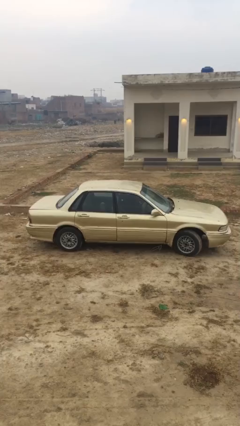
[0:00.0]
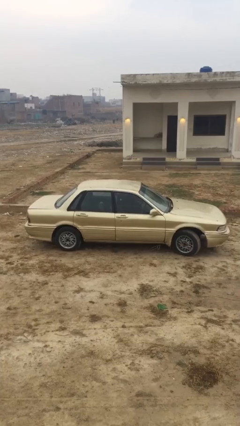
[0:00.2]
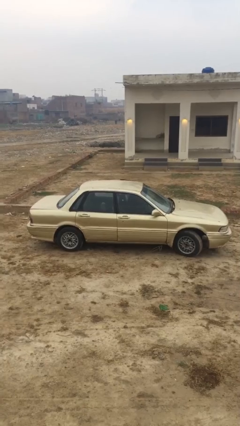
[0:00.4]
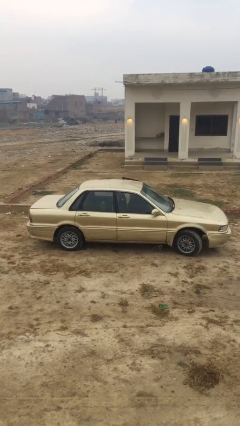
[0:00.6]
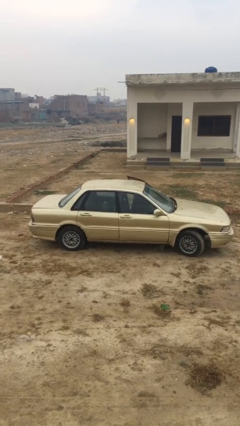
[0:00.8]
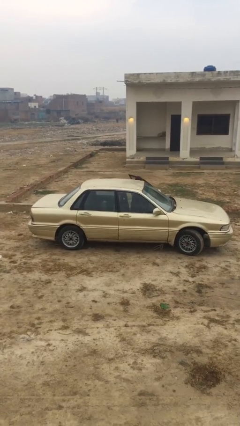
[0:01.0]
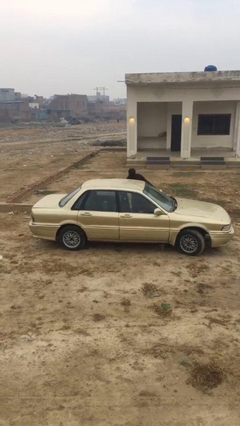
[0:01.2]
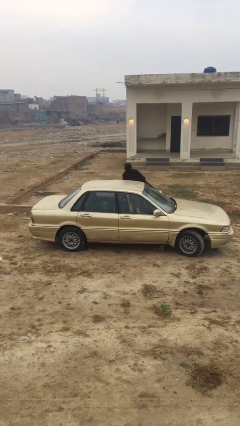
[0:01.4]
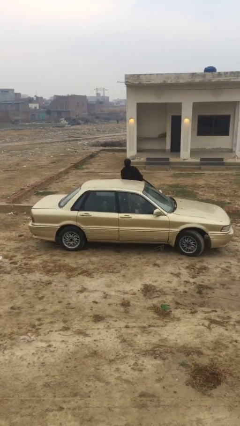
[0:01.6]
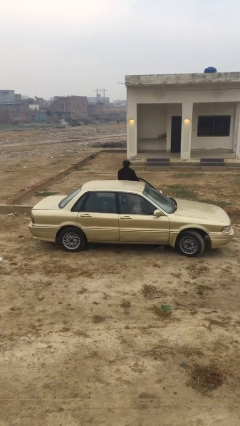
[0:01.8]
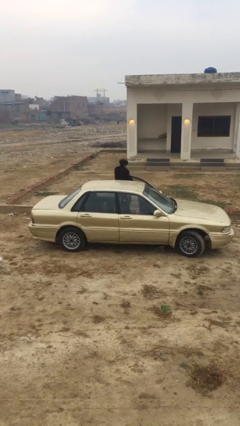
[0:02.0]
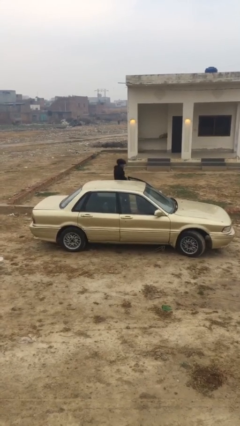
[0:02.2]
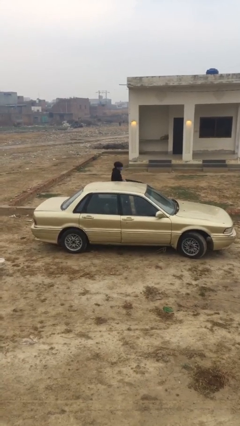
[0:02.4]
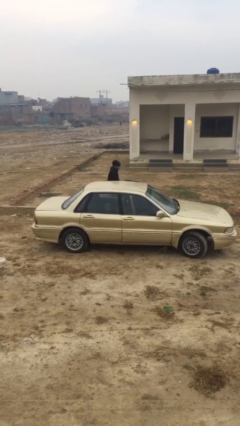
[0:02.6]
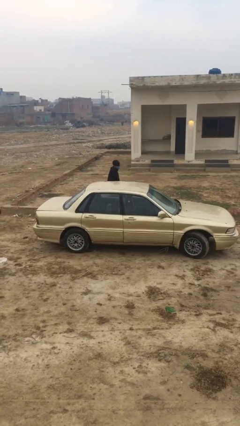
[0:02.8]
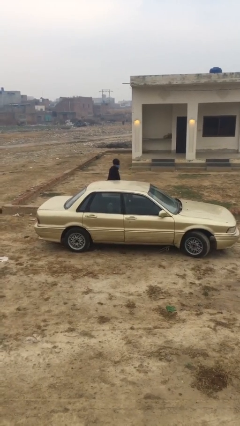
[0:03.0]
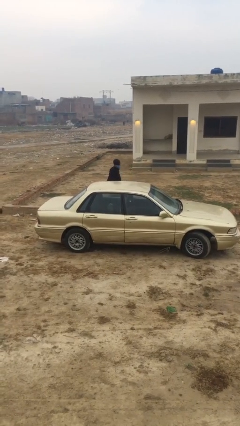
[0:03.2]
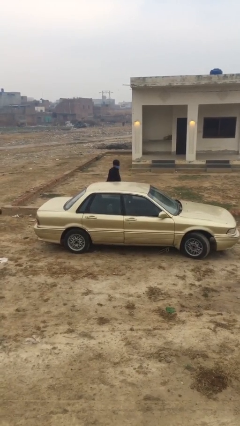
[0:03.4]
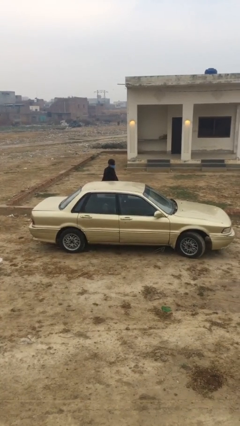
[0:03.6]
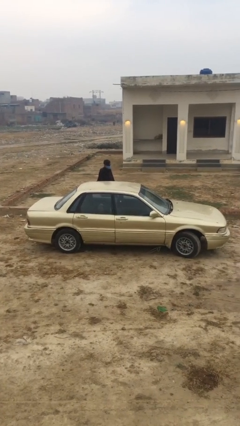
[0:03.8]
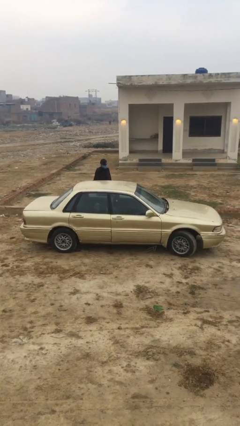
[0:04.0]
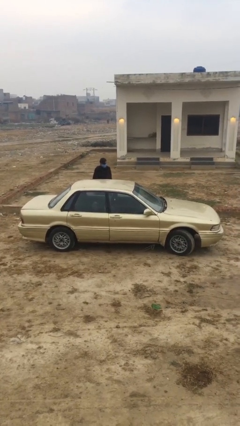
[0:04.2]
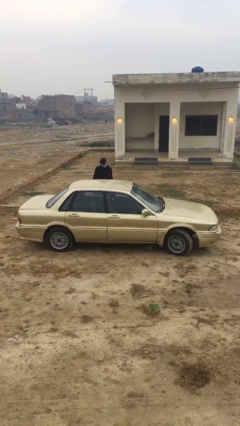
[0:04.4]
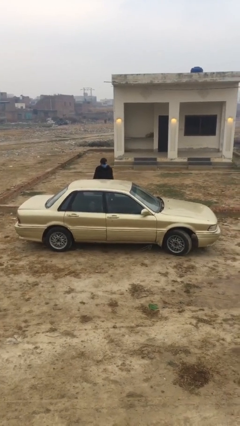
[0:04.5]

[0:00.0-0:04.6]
car drops off person

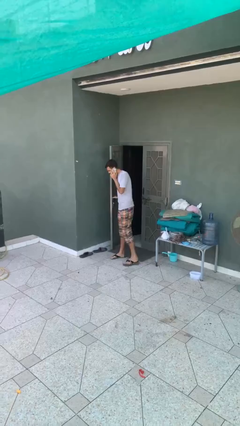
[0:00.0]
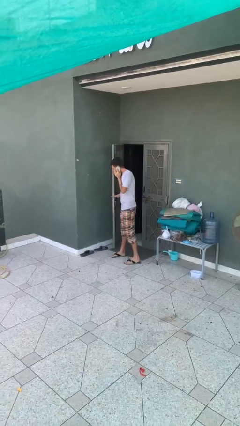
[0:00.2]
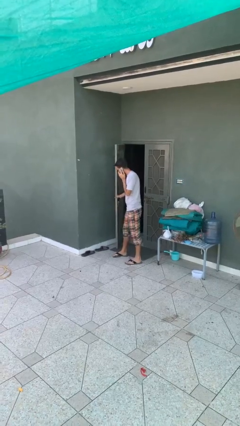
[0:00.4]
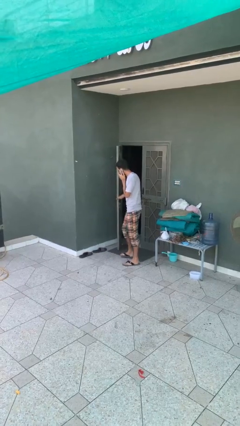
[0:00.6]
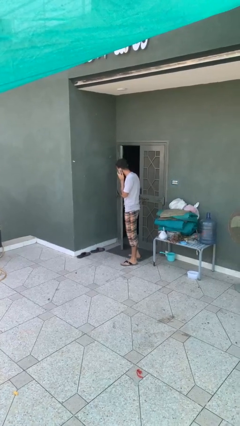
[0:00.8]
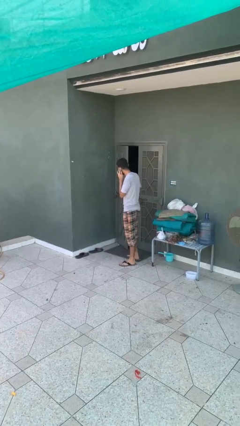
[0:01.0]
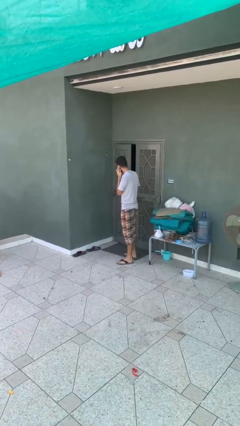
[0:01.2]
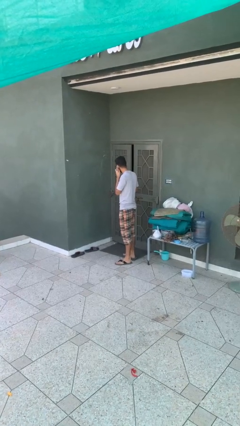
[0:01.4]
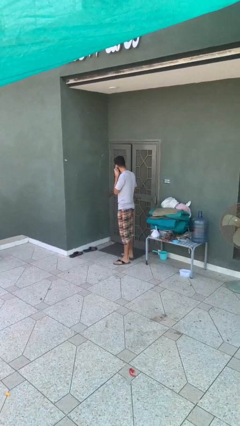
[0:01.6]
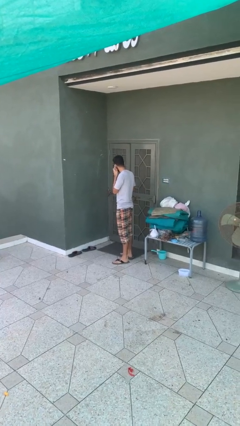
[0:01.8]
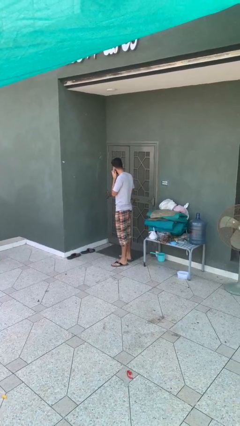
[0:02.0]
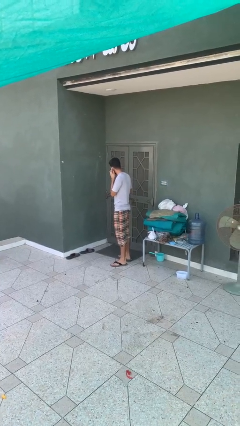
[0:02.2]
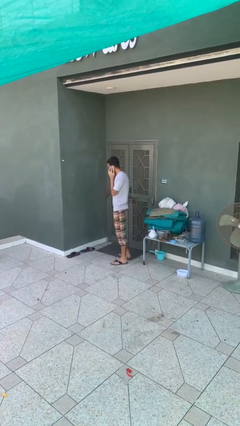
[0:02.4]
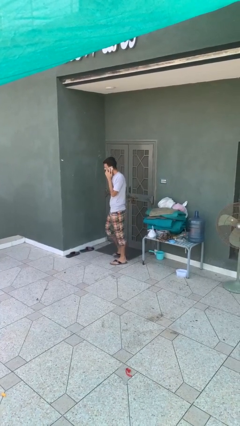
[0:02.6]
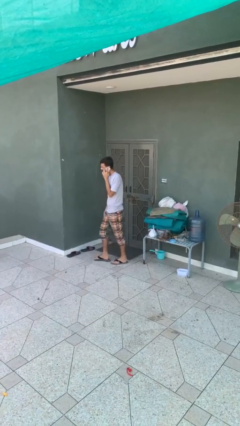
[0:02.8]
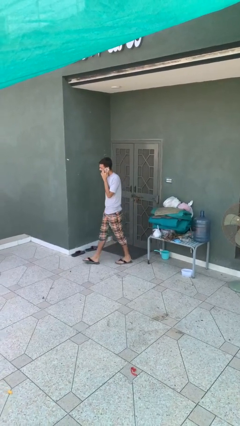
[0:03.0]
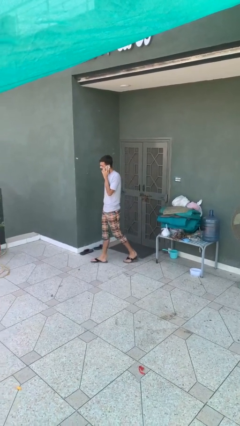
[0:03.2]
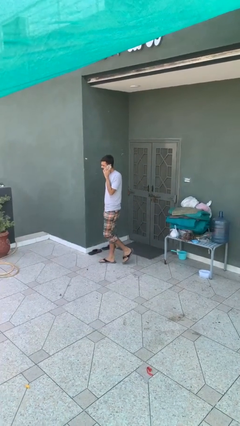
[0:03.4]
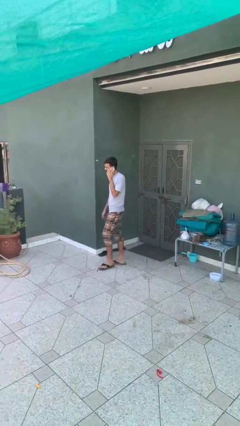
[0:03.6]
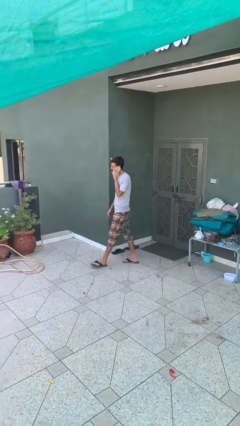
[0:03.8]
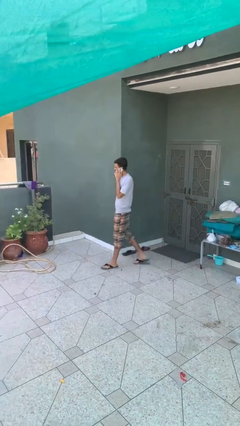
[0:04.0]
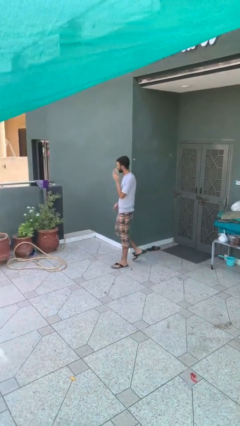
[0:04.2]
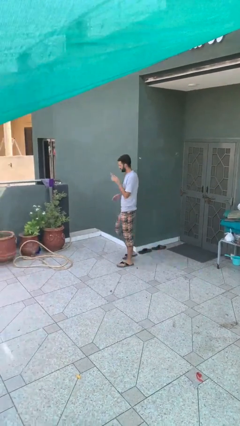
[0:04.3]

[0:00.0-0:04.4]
person closes facility door

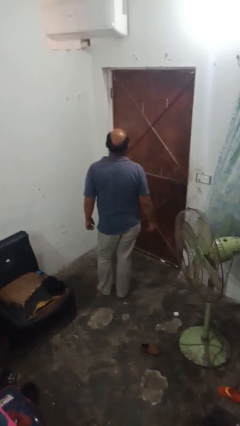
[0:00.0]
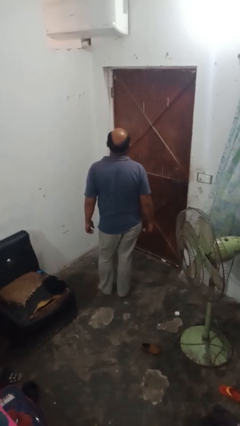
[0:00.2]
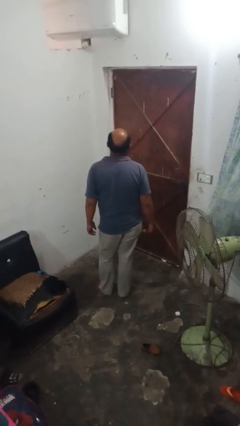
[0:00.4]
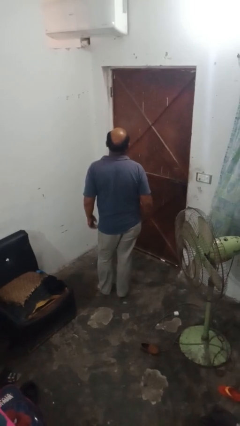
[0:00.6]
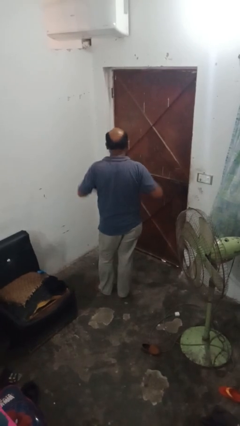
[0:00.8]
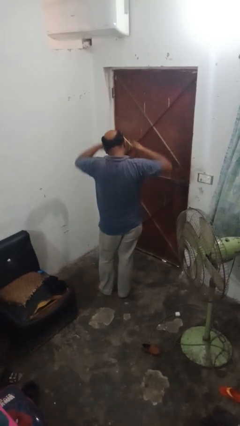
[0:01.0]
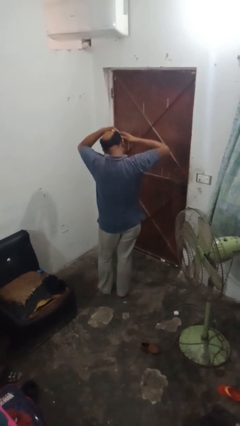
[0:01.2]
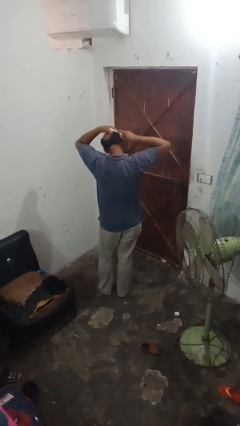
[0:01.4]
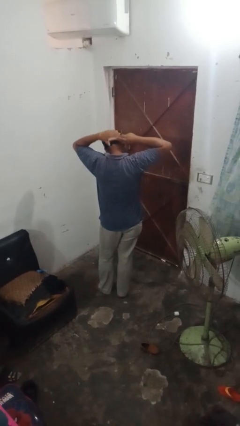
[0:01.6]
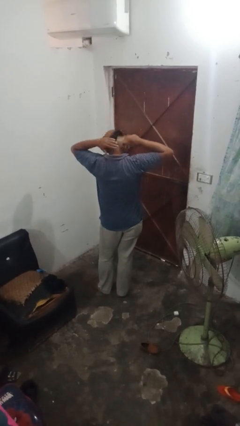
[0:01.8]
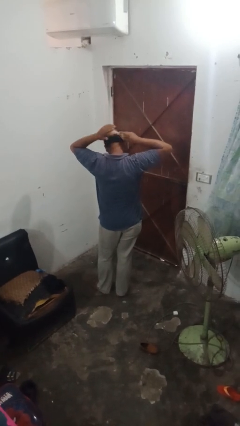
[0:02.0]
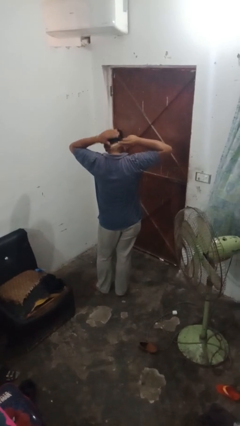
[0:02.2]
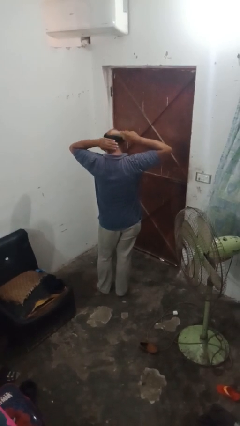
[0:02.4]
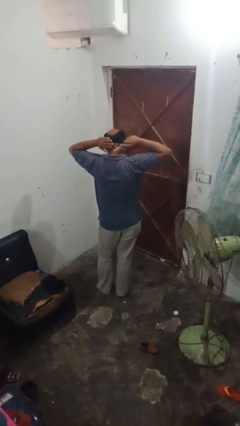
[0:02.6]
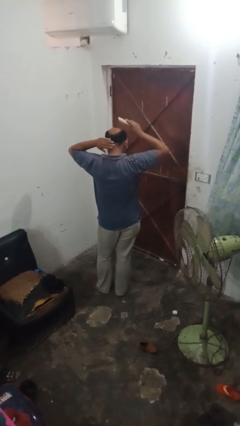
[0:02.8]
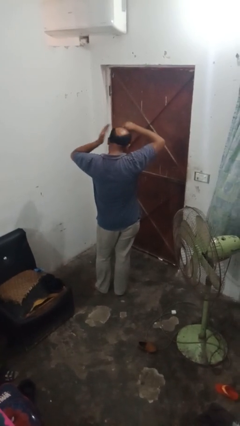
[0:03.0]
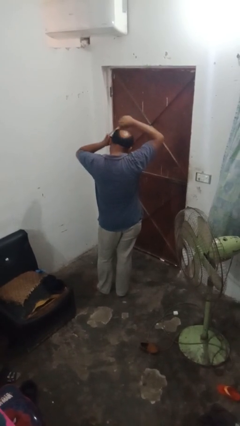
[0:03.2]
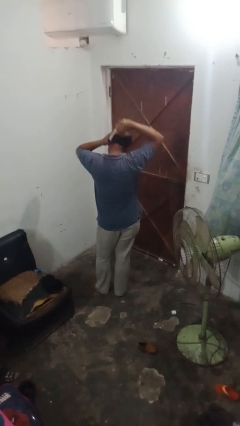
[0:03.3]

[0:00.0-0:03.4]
person brushes hair

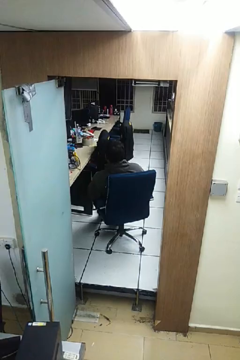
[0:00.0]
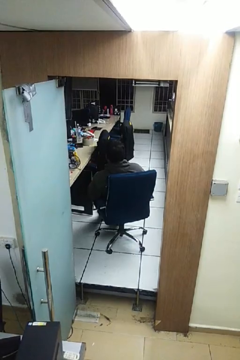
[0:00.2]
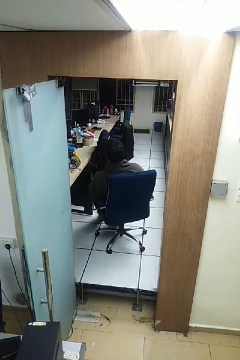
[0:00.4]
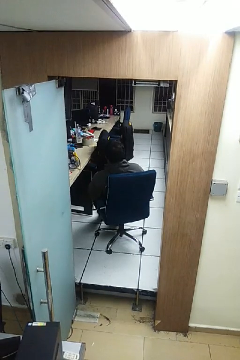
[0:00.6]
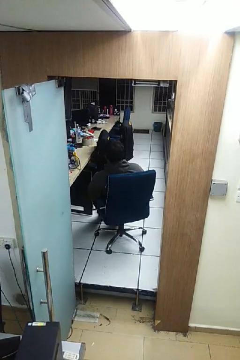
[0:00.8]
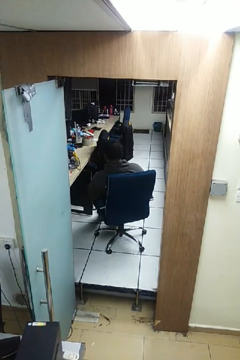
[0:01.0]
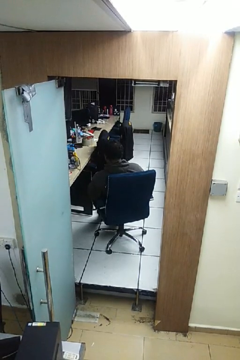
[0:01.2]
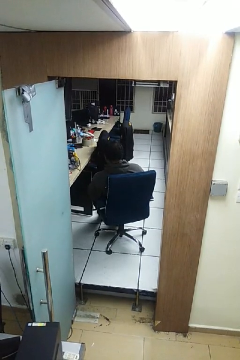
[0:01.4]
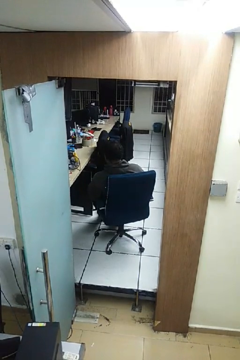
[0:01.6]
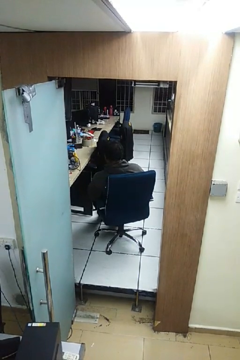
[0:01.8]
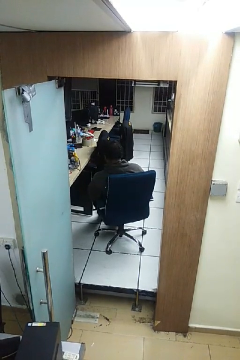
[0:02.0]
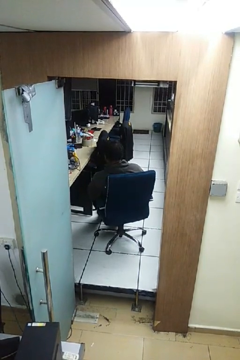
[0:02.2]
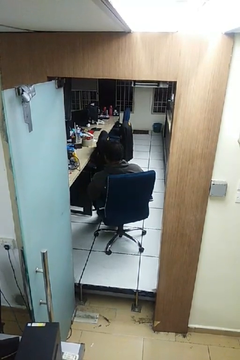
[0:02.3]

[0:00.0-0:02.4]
person nods head

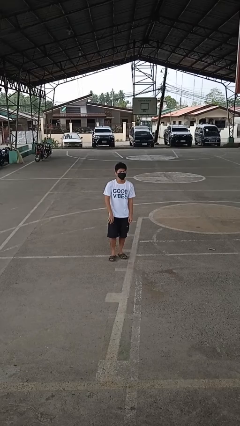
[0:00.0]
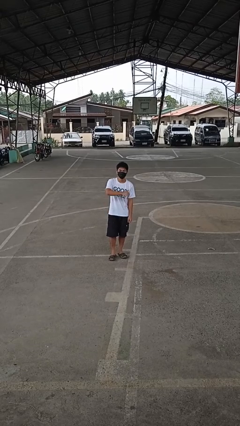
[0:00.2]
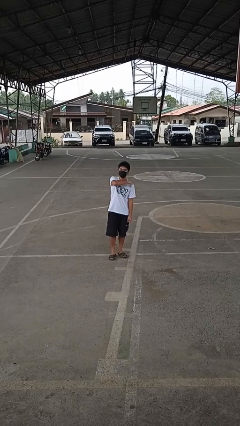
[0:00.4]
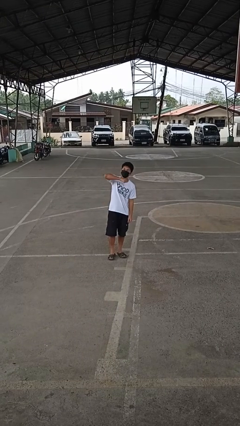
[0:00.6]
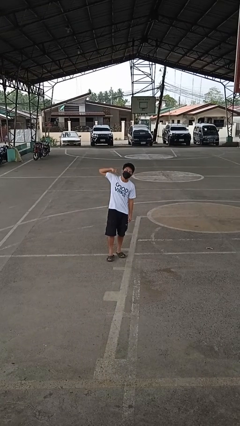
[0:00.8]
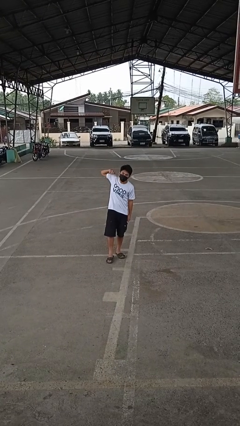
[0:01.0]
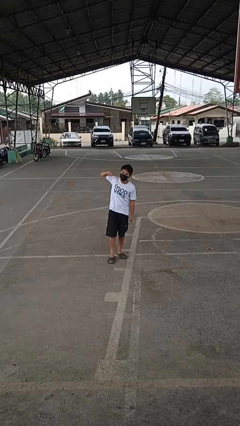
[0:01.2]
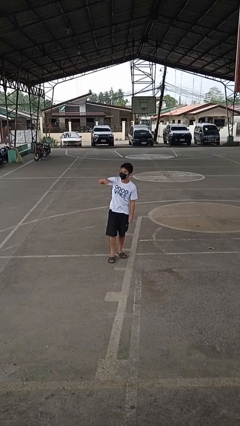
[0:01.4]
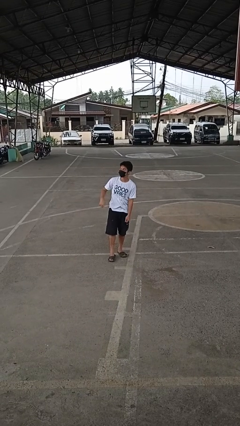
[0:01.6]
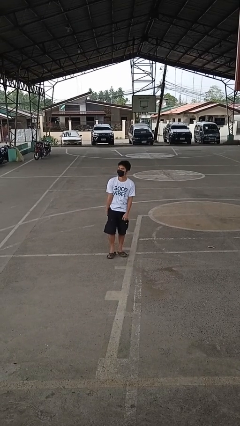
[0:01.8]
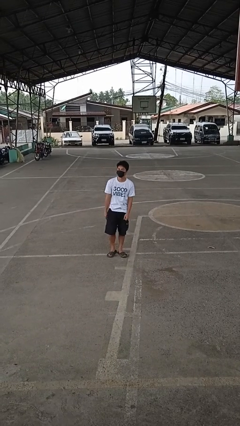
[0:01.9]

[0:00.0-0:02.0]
person gestures cut

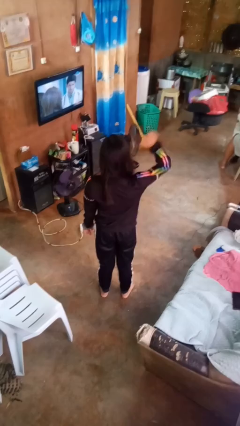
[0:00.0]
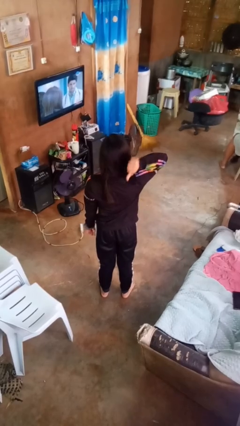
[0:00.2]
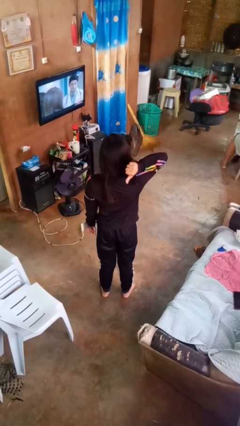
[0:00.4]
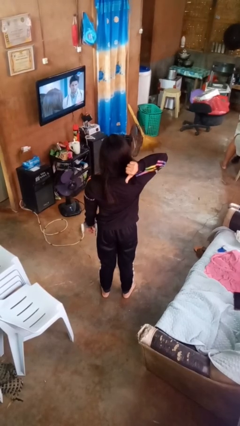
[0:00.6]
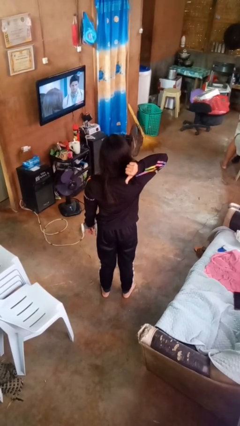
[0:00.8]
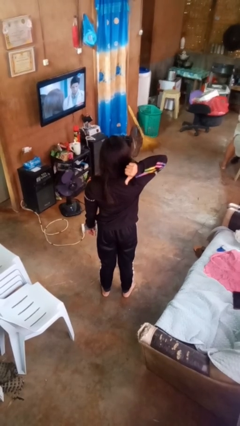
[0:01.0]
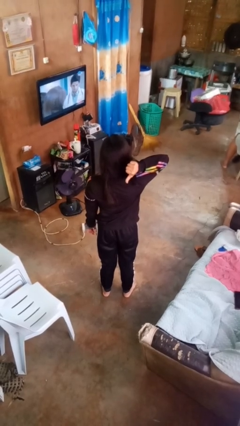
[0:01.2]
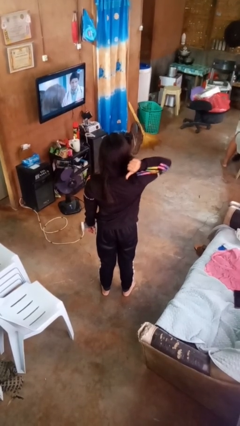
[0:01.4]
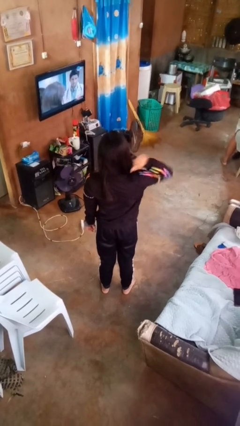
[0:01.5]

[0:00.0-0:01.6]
person gestures behind me
